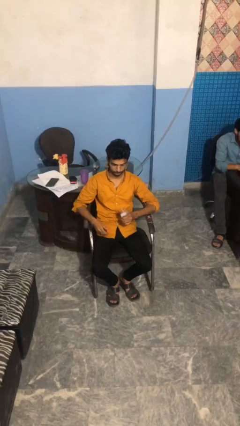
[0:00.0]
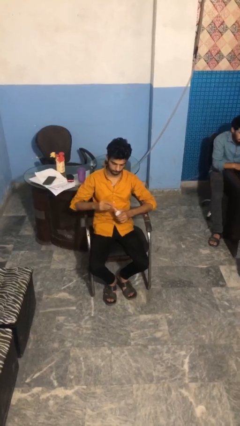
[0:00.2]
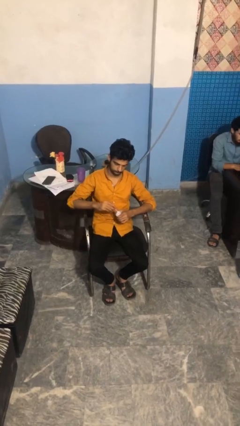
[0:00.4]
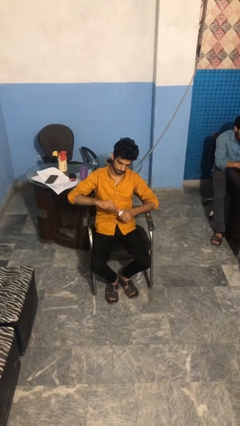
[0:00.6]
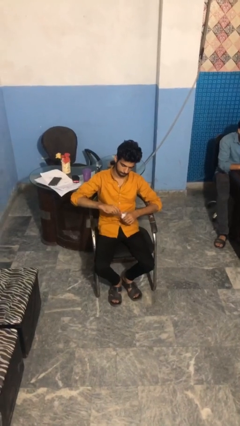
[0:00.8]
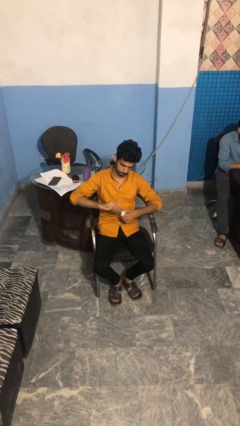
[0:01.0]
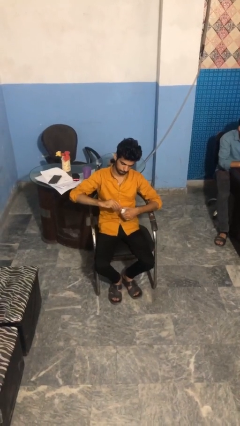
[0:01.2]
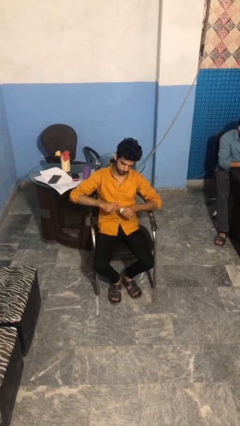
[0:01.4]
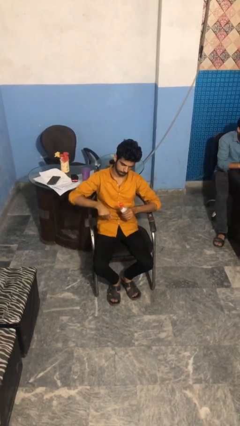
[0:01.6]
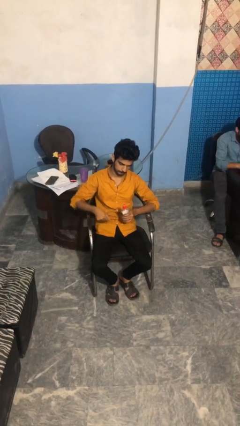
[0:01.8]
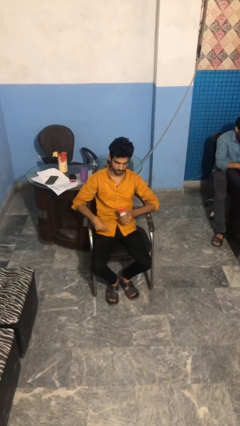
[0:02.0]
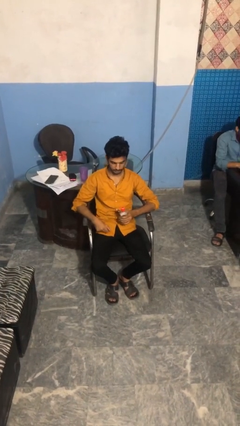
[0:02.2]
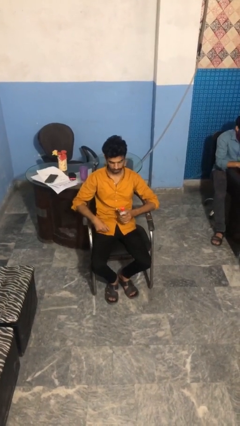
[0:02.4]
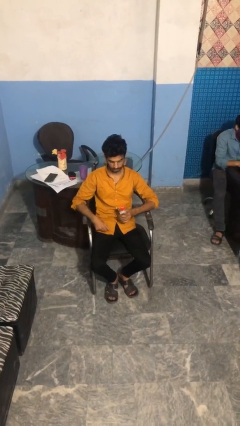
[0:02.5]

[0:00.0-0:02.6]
person screws lid to bottle

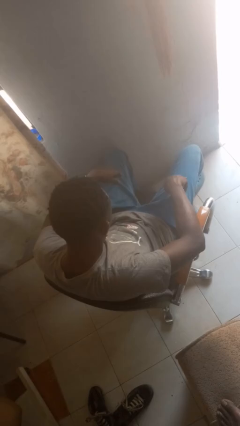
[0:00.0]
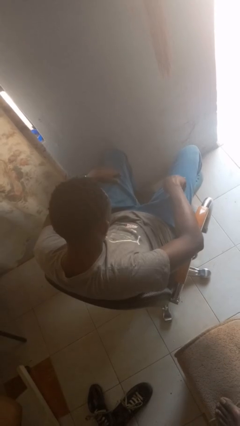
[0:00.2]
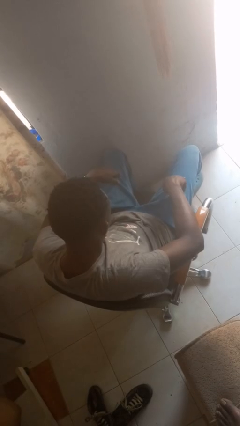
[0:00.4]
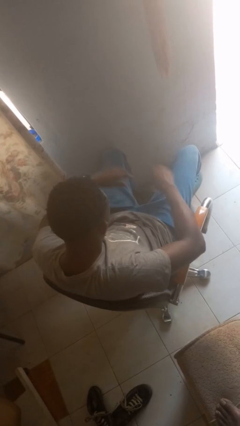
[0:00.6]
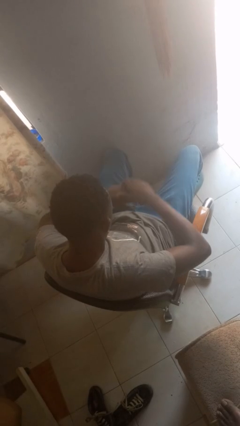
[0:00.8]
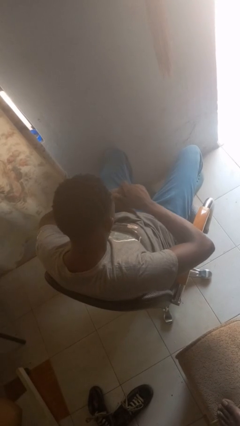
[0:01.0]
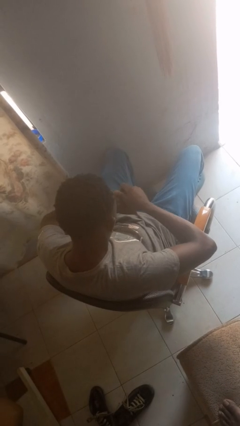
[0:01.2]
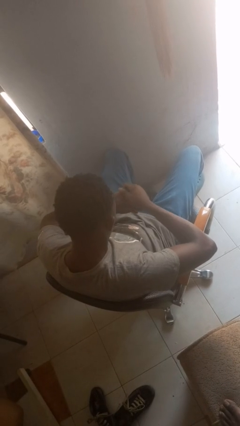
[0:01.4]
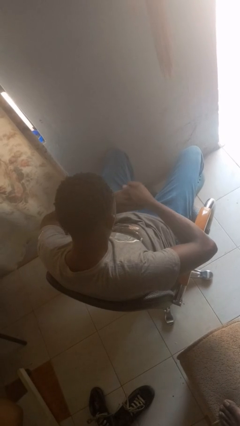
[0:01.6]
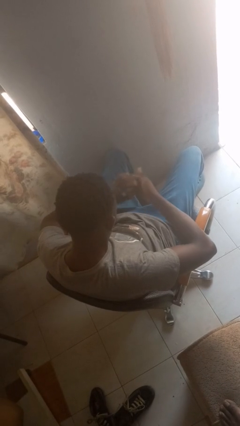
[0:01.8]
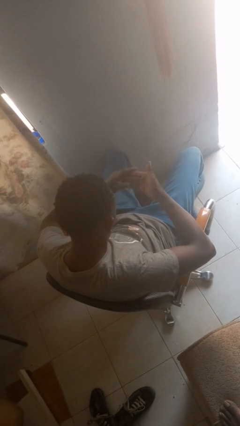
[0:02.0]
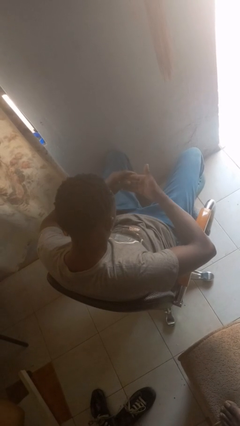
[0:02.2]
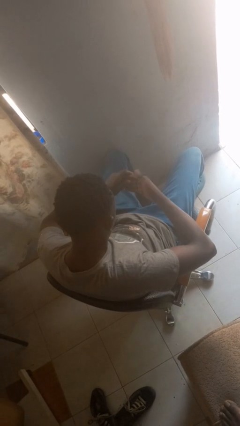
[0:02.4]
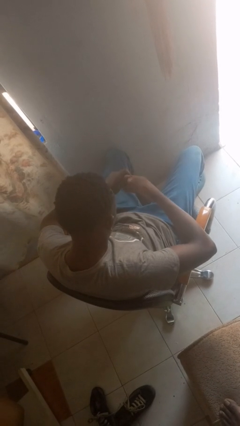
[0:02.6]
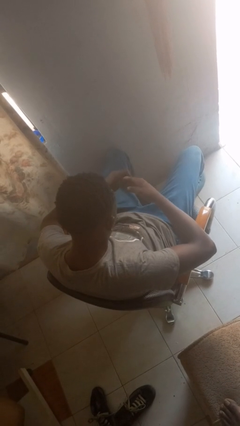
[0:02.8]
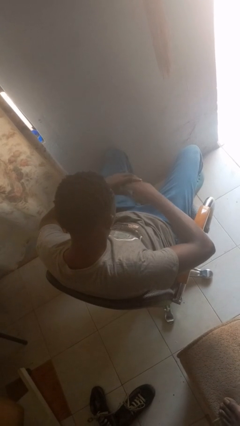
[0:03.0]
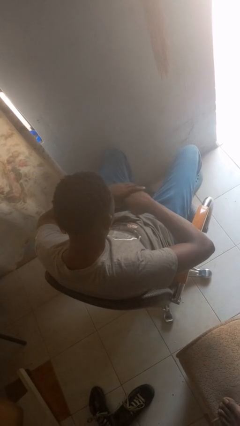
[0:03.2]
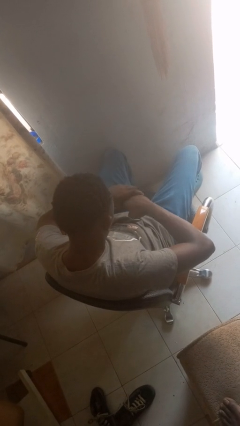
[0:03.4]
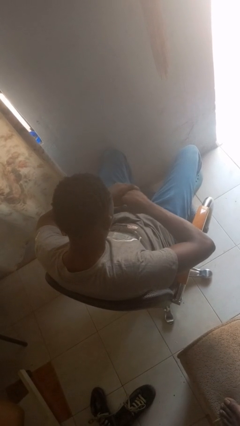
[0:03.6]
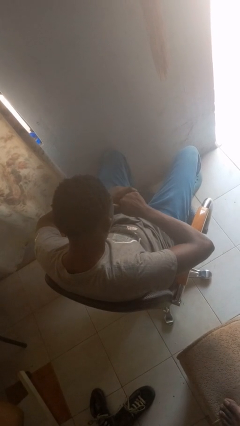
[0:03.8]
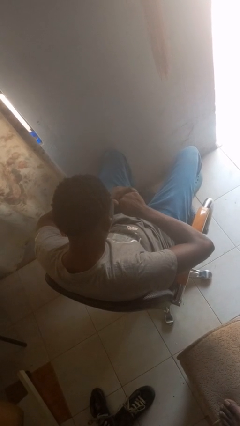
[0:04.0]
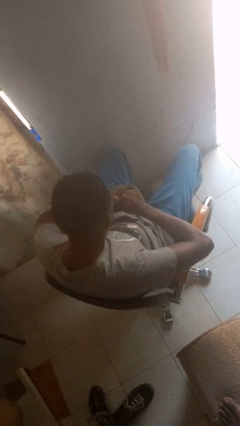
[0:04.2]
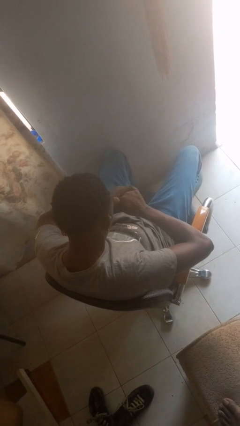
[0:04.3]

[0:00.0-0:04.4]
person looks at hands in lap

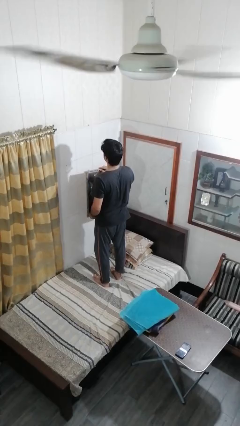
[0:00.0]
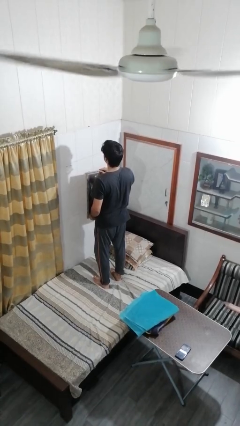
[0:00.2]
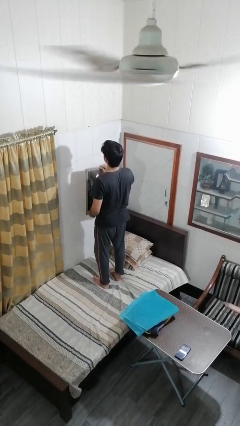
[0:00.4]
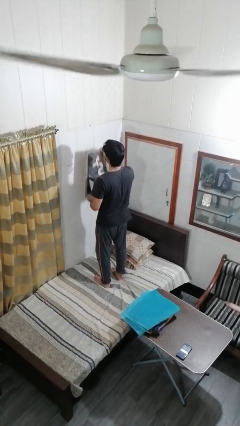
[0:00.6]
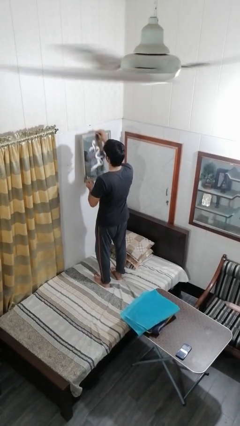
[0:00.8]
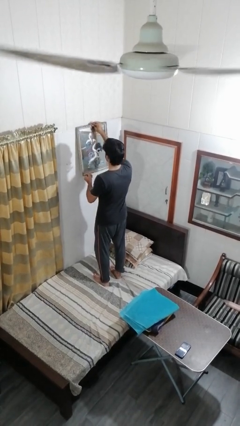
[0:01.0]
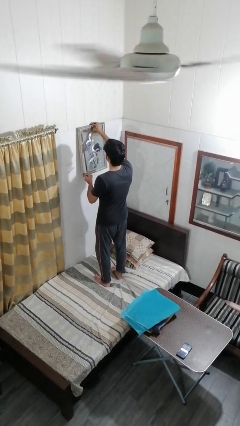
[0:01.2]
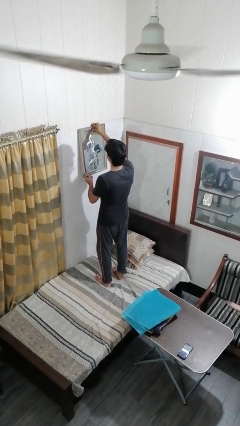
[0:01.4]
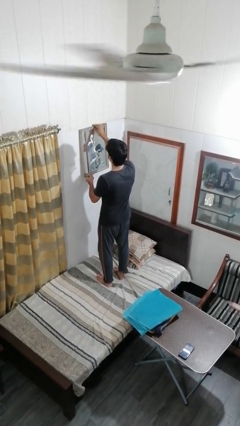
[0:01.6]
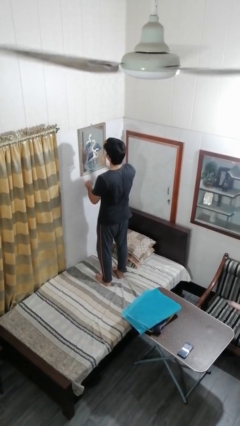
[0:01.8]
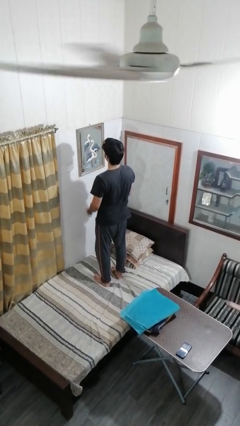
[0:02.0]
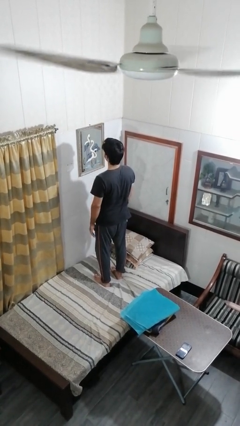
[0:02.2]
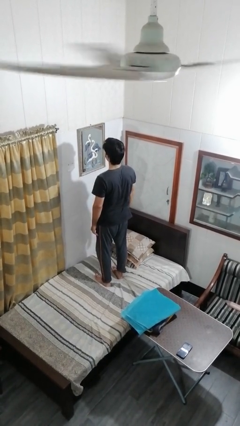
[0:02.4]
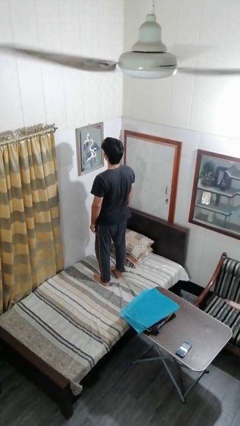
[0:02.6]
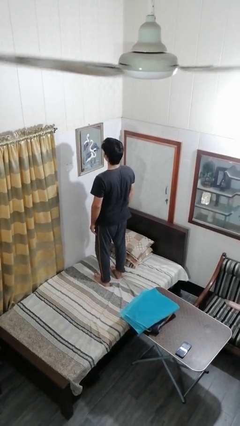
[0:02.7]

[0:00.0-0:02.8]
person puts up picture frame

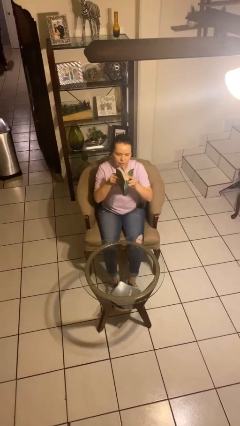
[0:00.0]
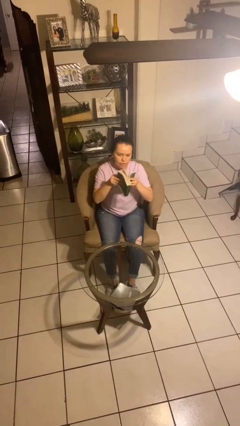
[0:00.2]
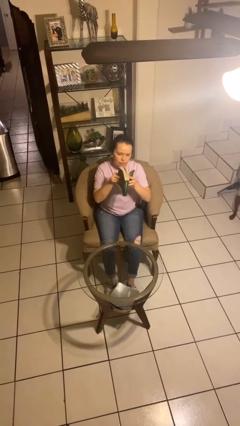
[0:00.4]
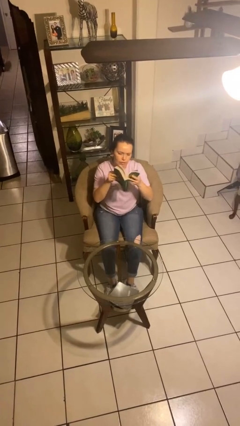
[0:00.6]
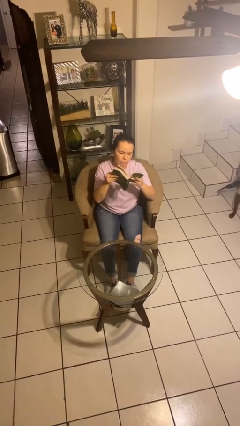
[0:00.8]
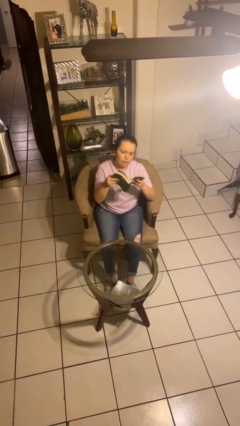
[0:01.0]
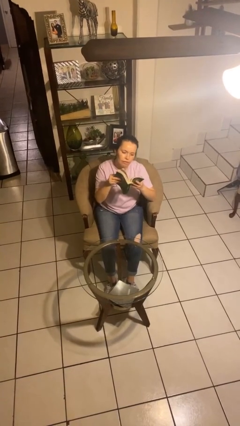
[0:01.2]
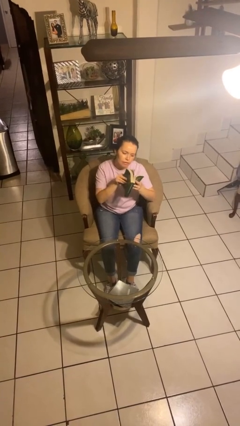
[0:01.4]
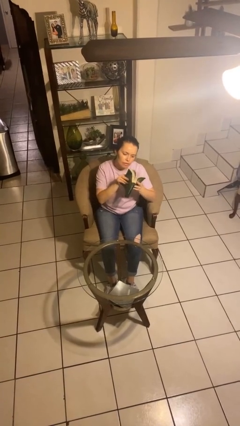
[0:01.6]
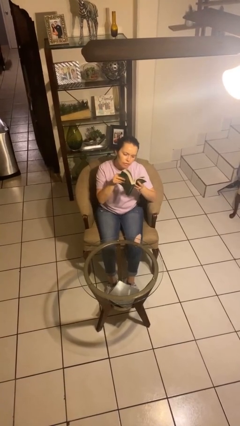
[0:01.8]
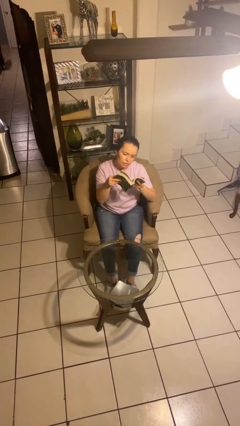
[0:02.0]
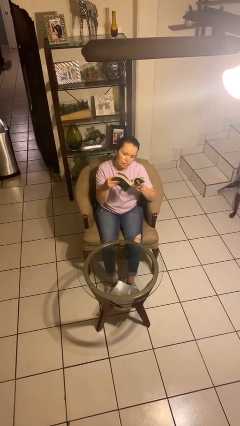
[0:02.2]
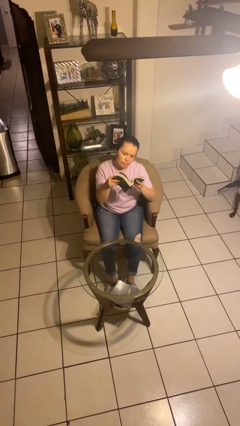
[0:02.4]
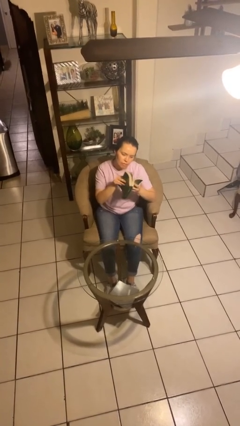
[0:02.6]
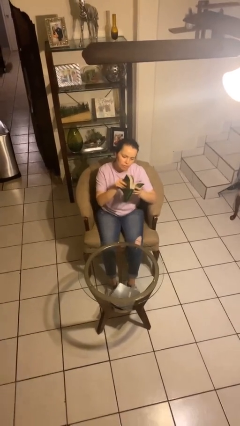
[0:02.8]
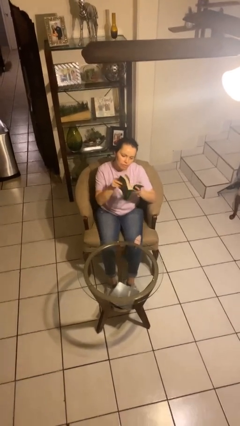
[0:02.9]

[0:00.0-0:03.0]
person reads book

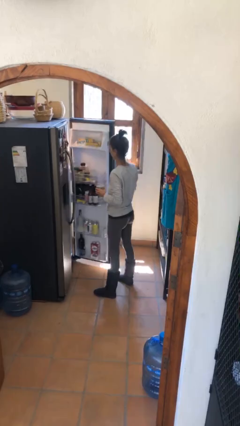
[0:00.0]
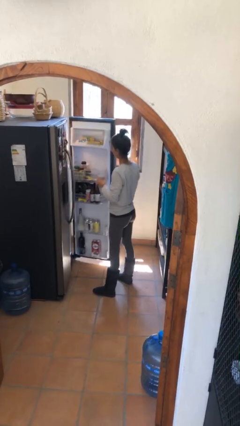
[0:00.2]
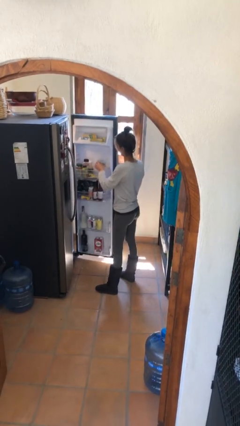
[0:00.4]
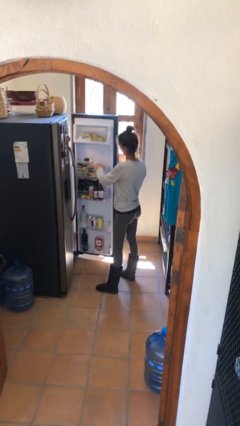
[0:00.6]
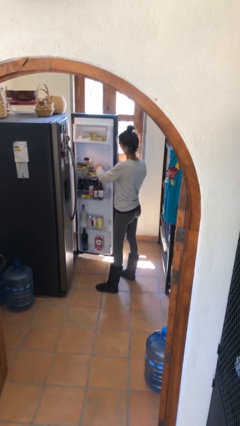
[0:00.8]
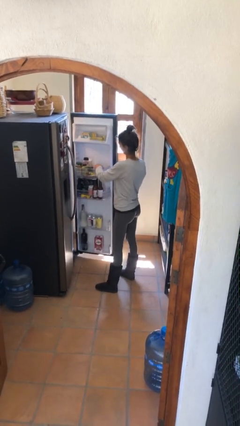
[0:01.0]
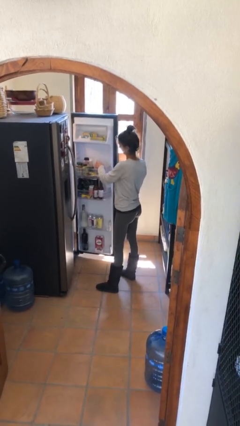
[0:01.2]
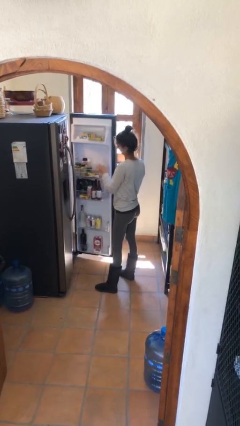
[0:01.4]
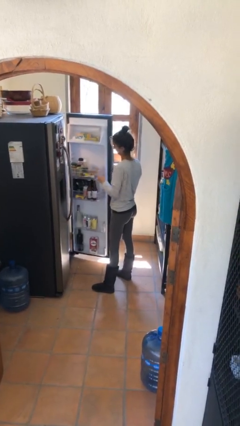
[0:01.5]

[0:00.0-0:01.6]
person puts object into refrigerator

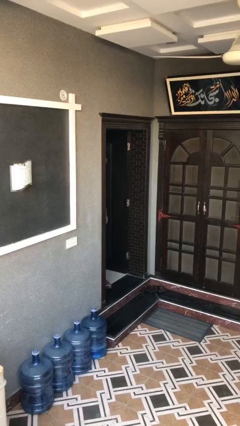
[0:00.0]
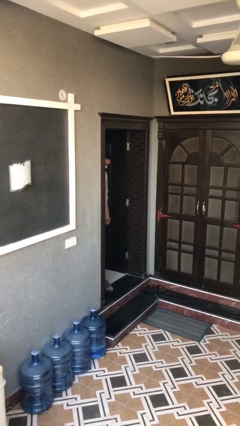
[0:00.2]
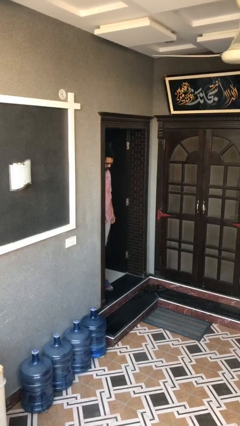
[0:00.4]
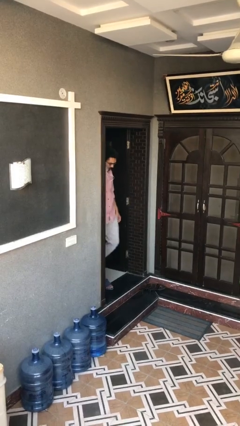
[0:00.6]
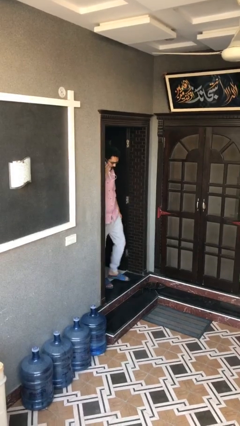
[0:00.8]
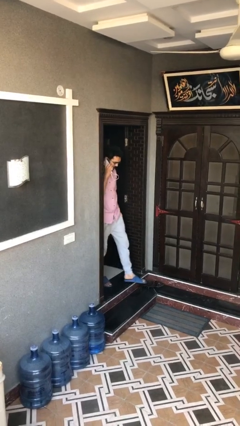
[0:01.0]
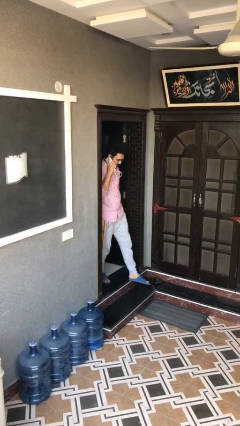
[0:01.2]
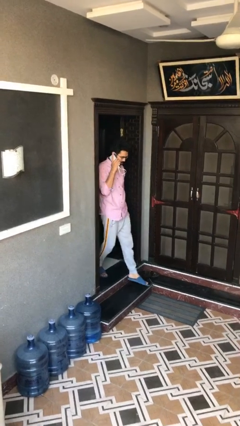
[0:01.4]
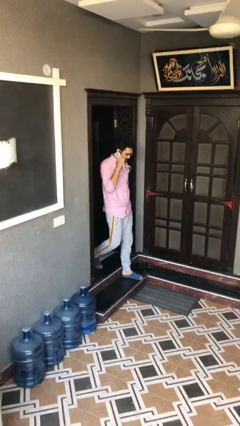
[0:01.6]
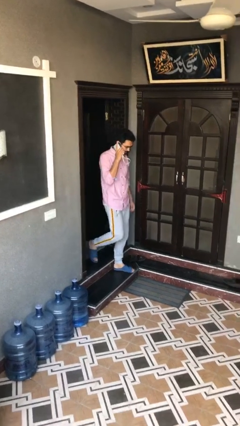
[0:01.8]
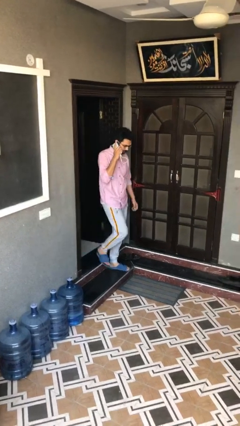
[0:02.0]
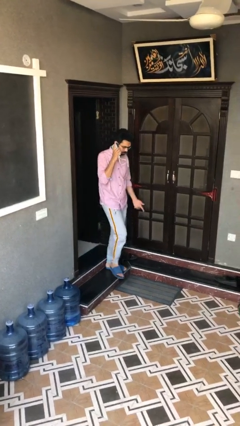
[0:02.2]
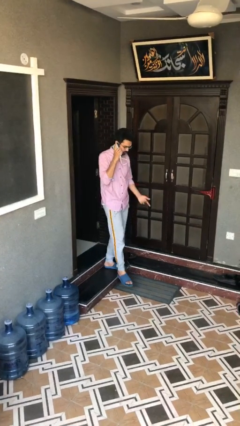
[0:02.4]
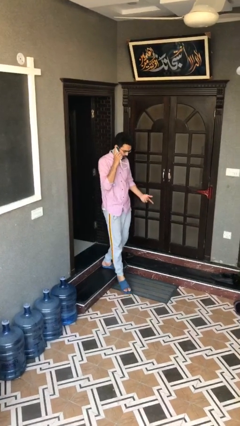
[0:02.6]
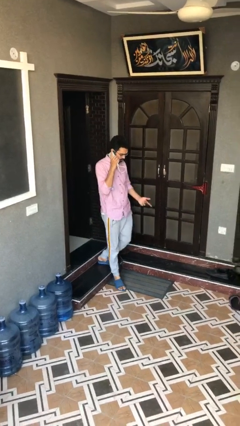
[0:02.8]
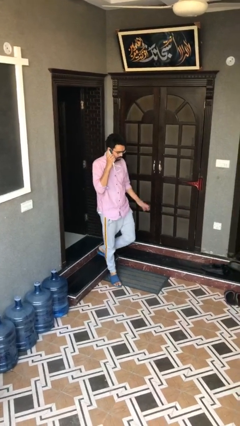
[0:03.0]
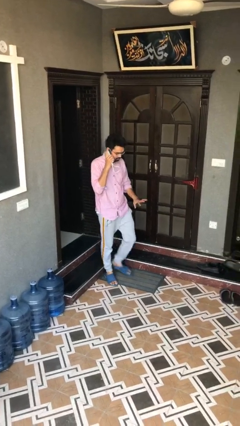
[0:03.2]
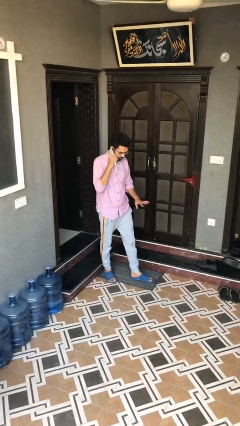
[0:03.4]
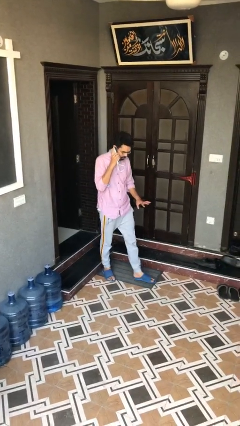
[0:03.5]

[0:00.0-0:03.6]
person enters scene through structure
